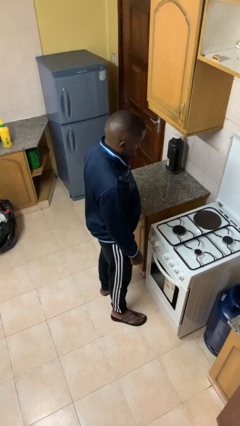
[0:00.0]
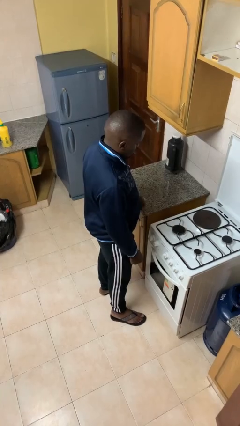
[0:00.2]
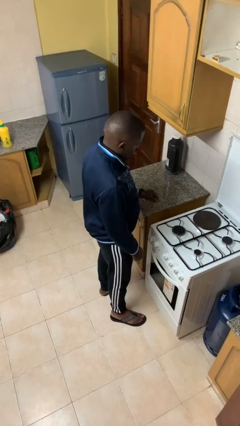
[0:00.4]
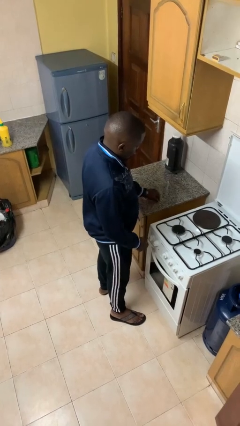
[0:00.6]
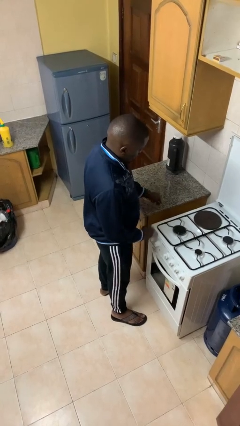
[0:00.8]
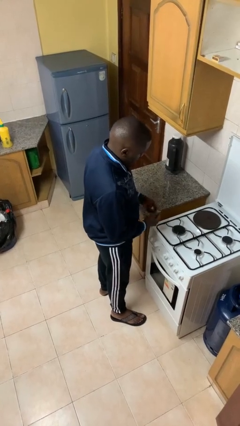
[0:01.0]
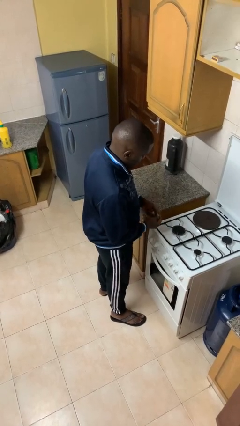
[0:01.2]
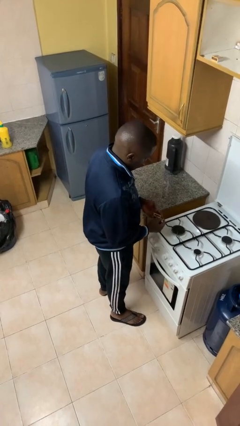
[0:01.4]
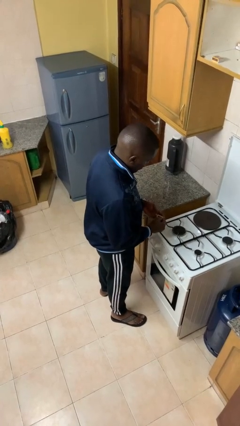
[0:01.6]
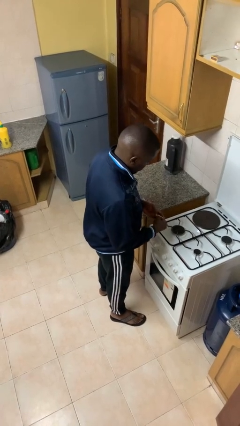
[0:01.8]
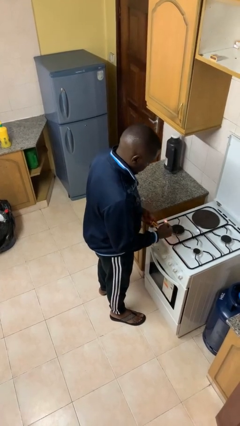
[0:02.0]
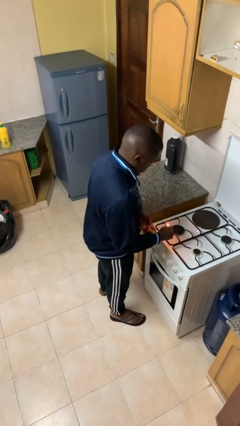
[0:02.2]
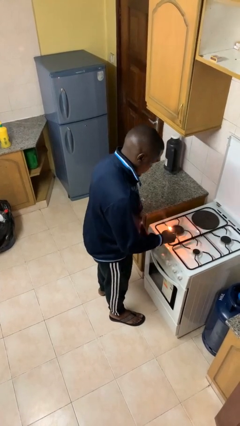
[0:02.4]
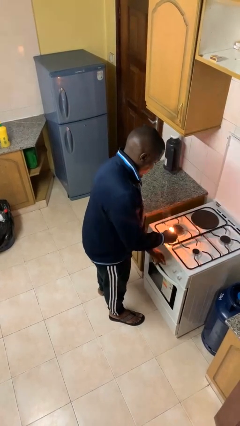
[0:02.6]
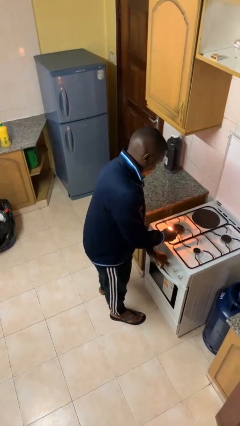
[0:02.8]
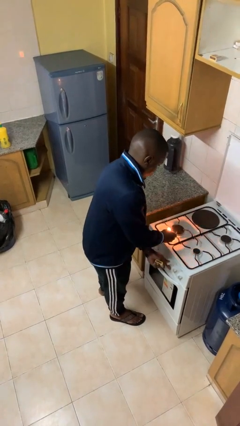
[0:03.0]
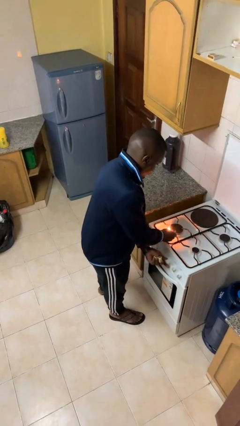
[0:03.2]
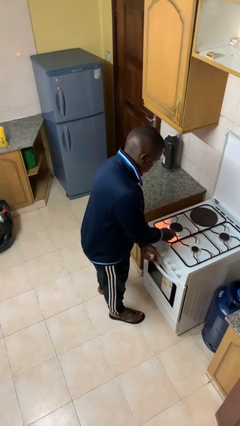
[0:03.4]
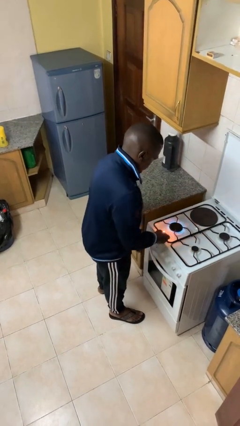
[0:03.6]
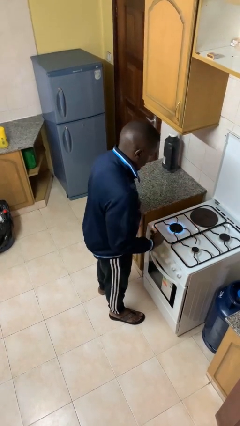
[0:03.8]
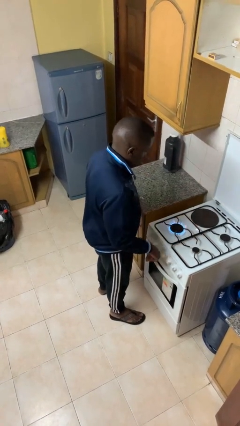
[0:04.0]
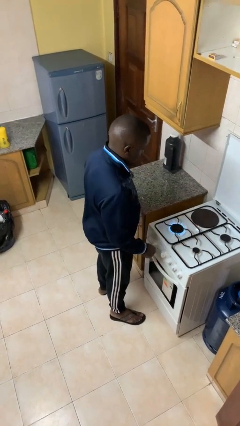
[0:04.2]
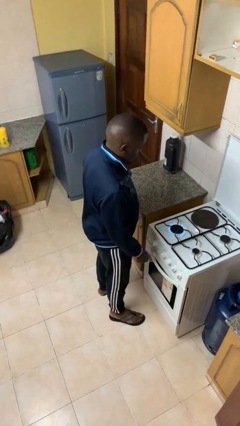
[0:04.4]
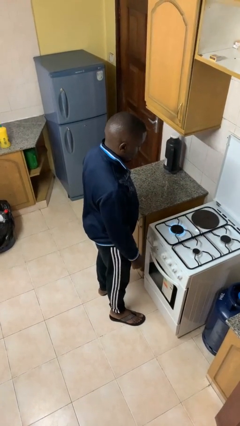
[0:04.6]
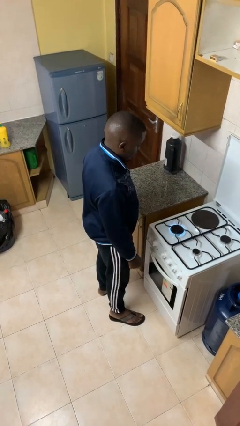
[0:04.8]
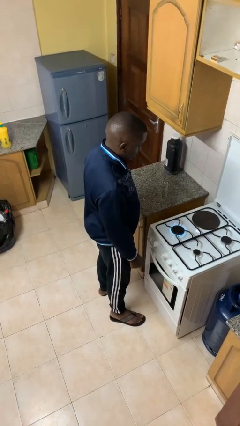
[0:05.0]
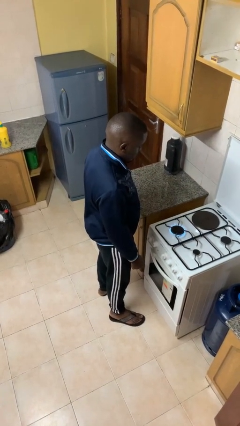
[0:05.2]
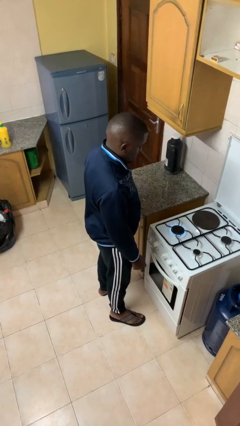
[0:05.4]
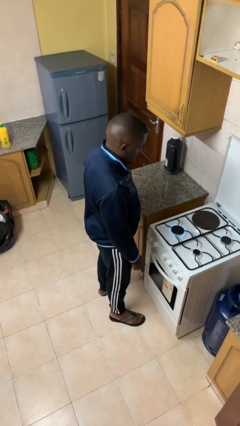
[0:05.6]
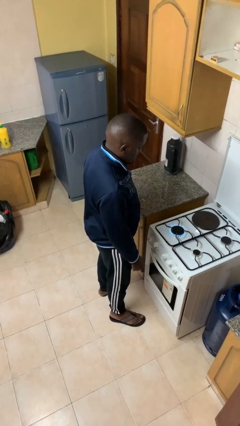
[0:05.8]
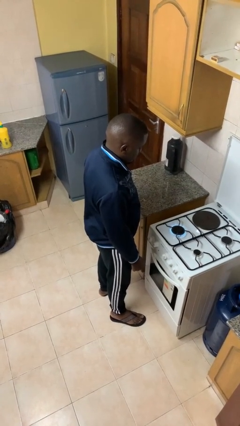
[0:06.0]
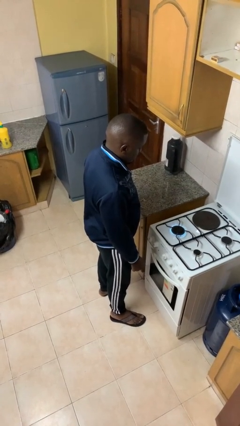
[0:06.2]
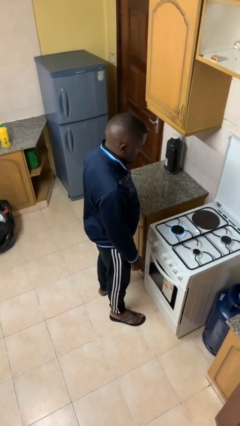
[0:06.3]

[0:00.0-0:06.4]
person turns on stovetop

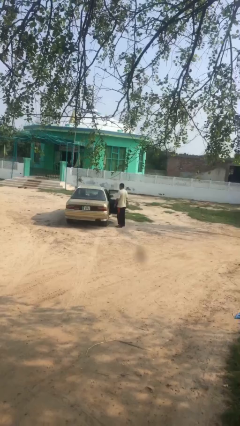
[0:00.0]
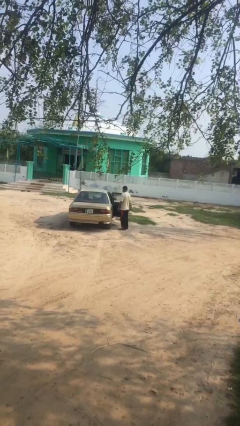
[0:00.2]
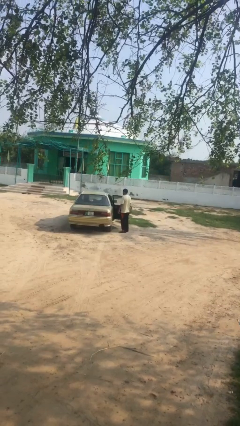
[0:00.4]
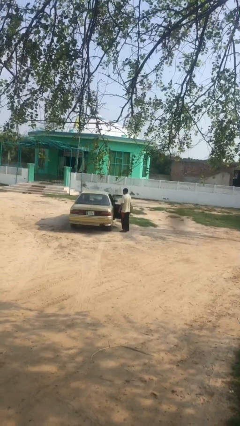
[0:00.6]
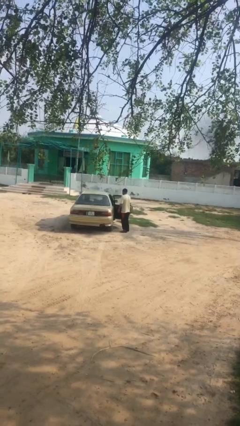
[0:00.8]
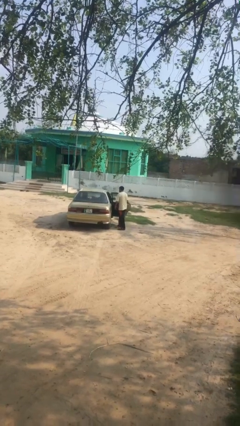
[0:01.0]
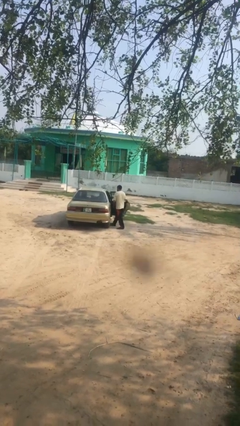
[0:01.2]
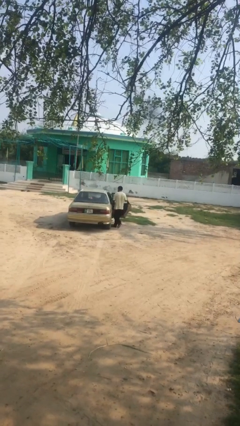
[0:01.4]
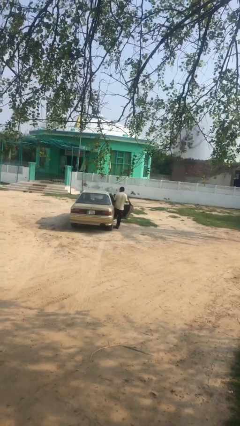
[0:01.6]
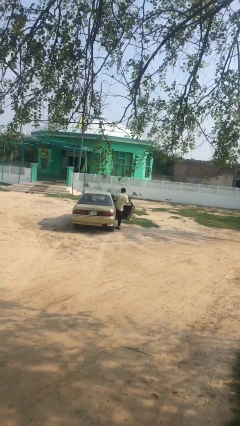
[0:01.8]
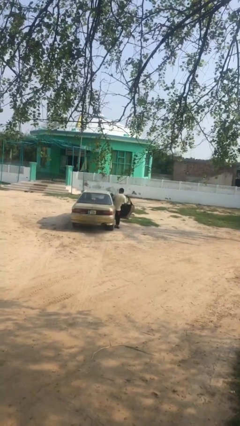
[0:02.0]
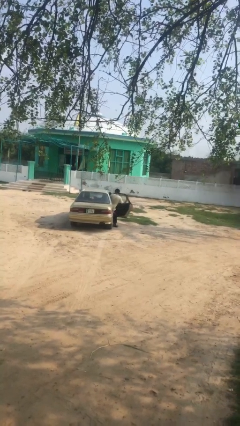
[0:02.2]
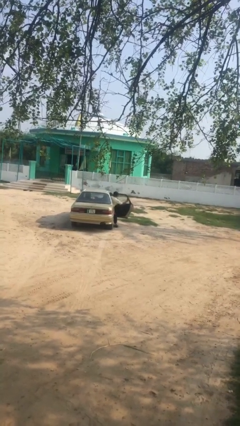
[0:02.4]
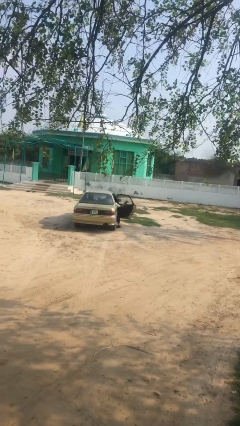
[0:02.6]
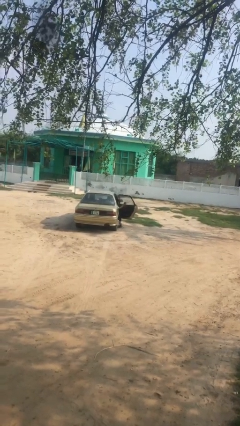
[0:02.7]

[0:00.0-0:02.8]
person enters car

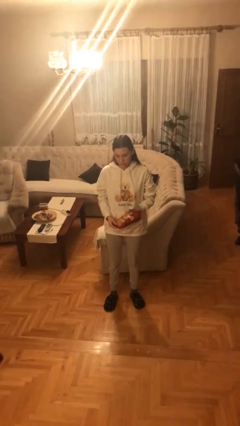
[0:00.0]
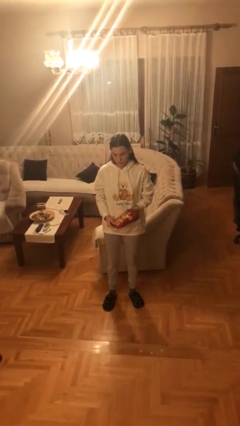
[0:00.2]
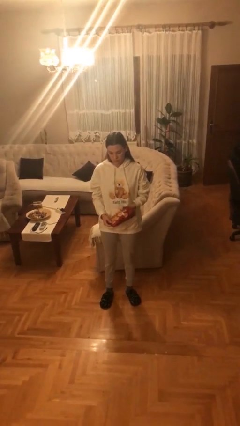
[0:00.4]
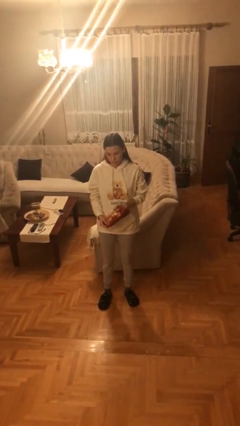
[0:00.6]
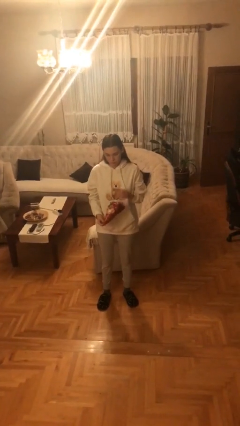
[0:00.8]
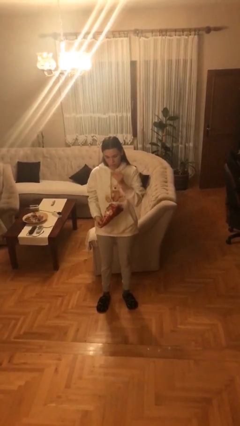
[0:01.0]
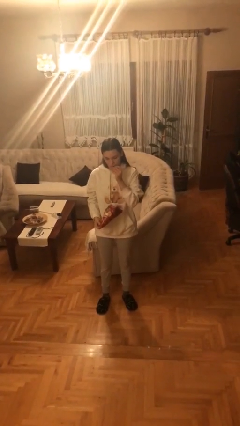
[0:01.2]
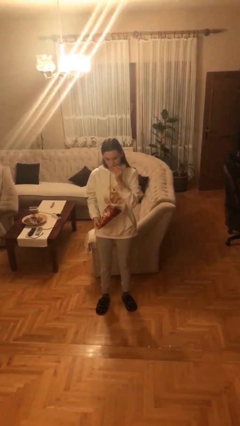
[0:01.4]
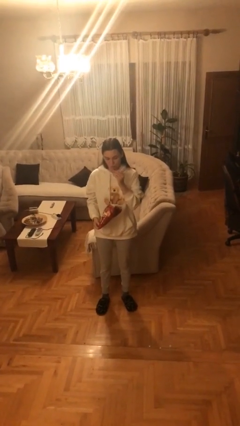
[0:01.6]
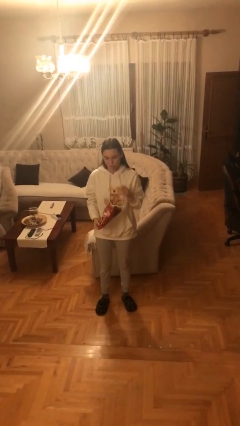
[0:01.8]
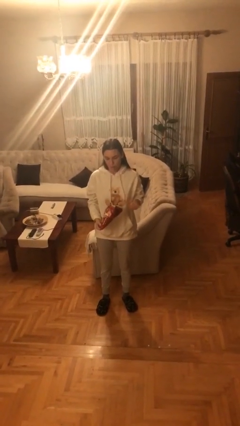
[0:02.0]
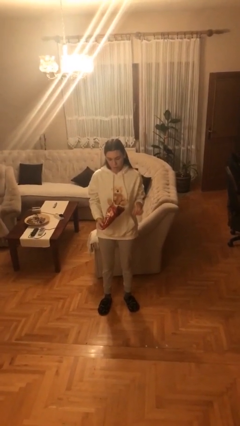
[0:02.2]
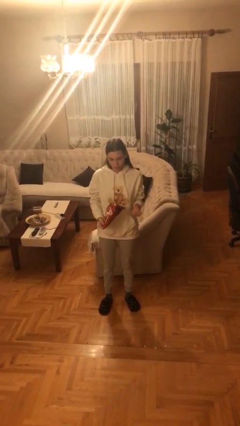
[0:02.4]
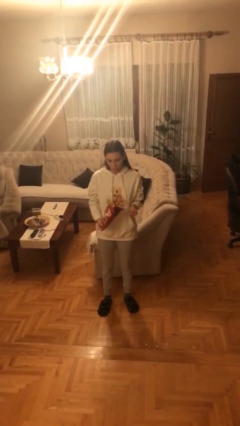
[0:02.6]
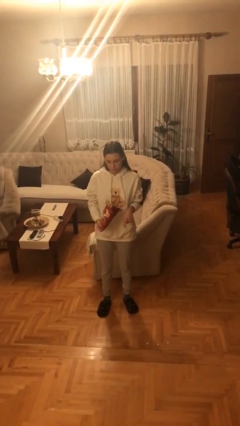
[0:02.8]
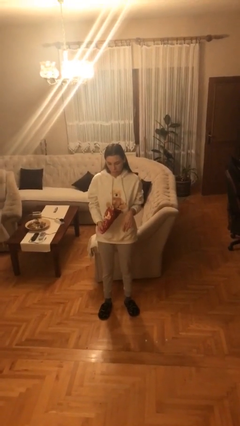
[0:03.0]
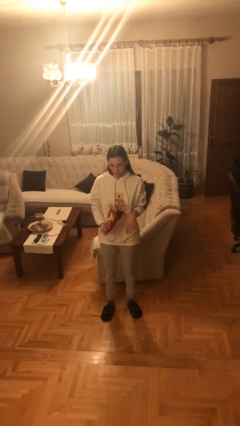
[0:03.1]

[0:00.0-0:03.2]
person eats snack from bag

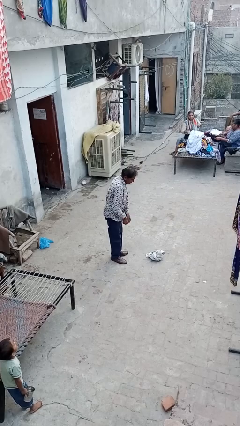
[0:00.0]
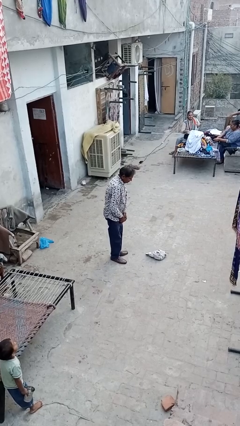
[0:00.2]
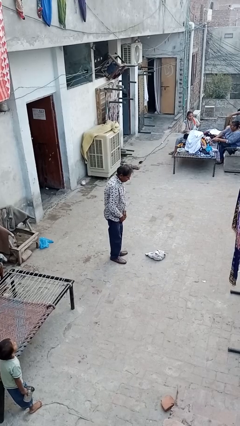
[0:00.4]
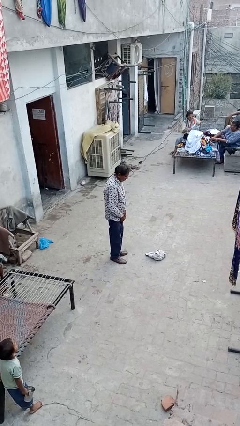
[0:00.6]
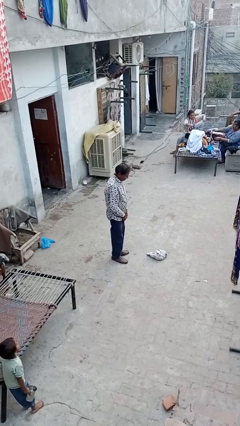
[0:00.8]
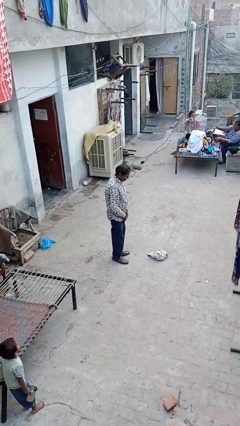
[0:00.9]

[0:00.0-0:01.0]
person catches dropped object

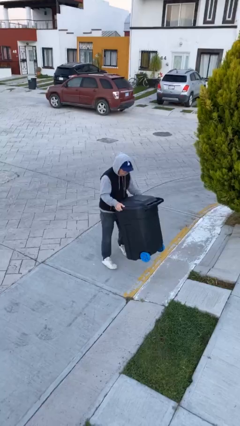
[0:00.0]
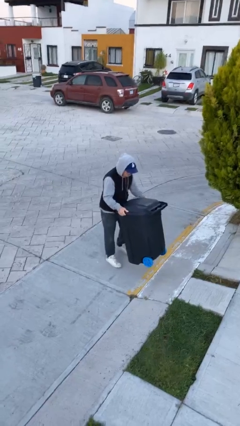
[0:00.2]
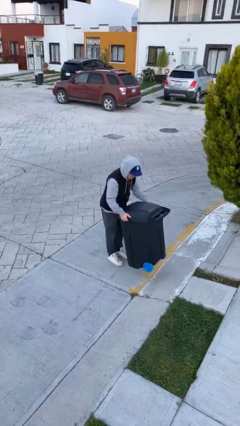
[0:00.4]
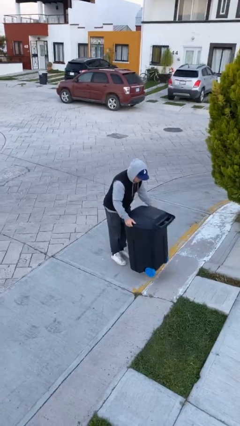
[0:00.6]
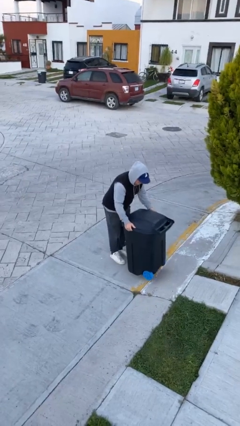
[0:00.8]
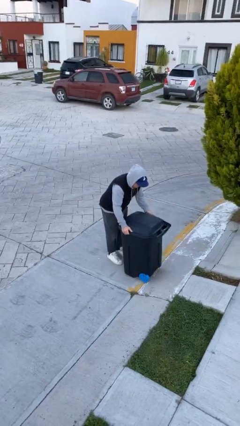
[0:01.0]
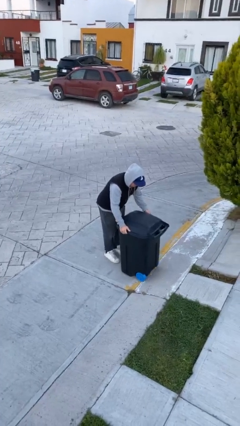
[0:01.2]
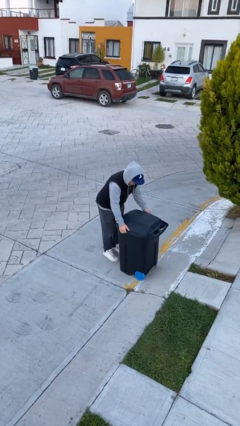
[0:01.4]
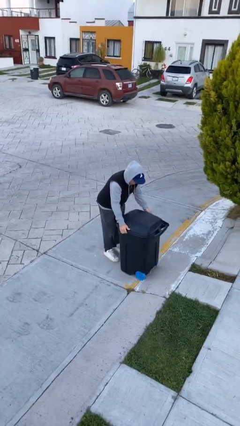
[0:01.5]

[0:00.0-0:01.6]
person puts down object on floor

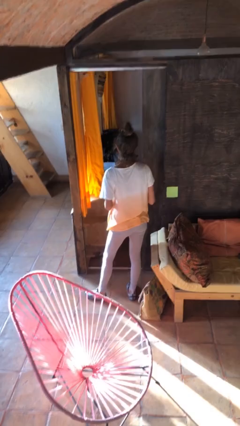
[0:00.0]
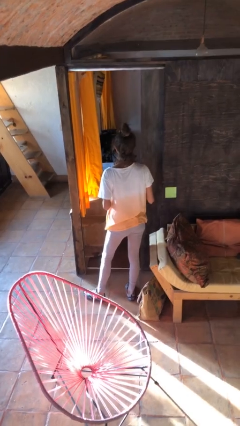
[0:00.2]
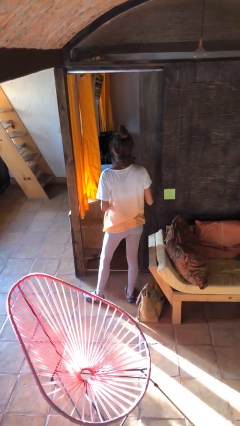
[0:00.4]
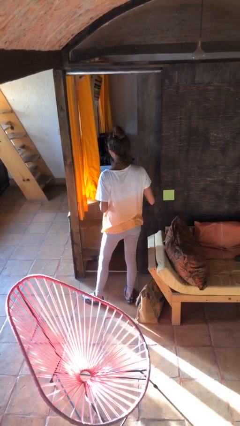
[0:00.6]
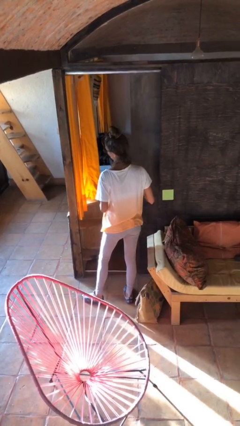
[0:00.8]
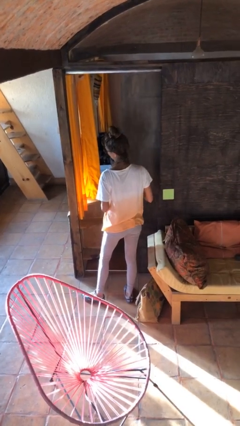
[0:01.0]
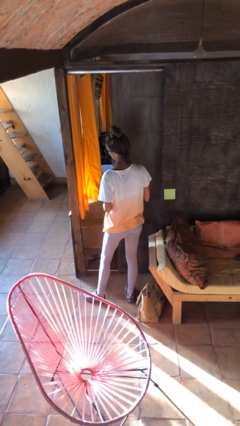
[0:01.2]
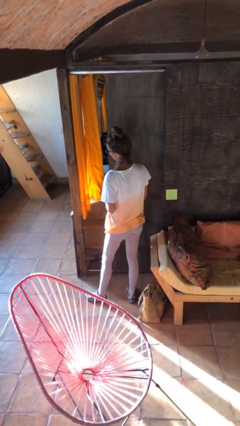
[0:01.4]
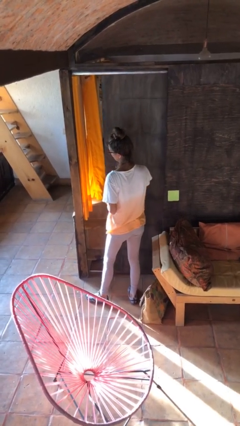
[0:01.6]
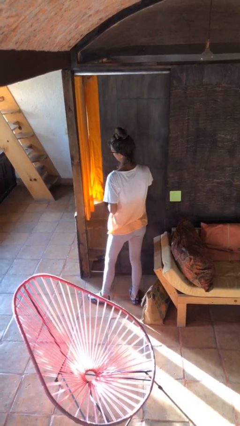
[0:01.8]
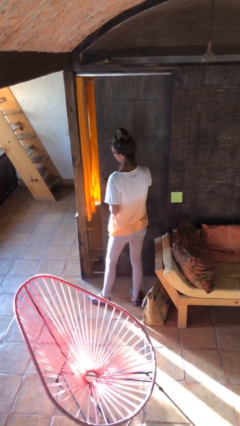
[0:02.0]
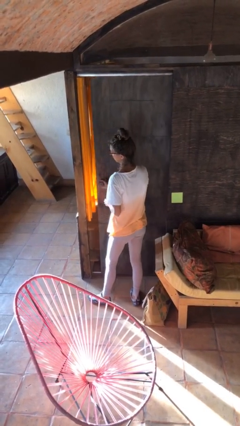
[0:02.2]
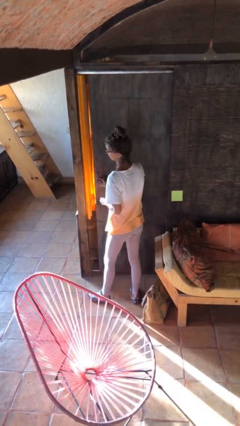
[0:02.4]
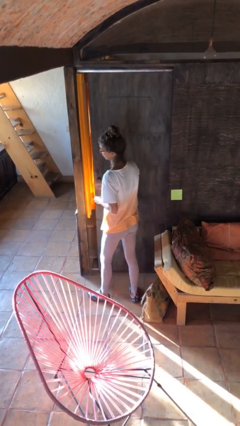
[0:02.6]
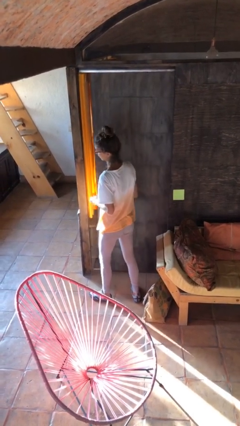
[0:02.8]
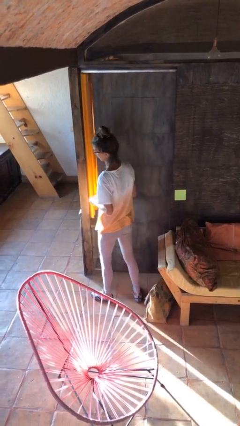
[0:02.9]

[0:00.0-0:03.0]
person closes sliding door
